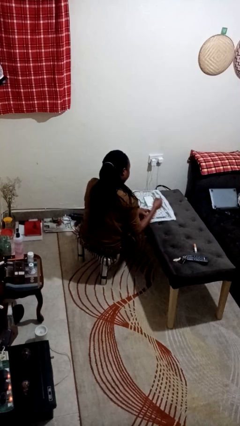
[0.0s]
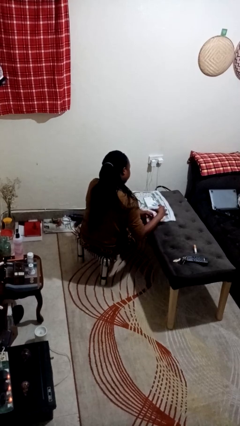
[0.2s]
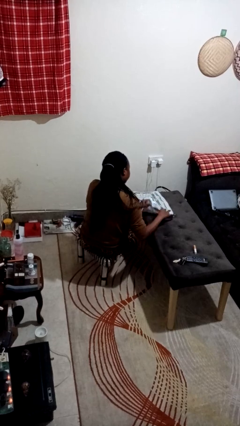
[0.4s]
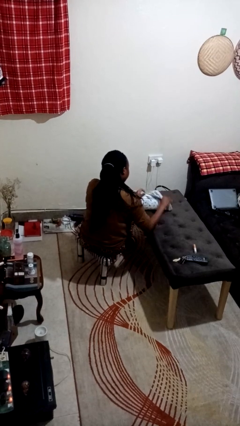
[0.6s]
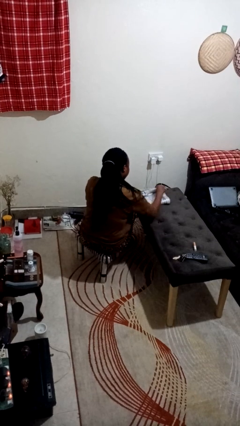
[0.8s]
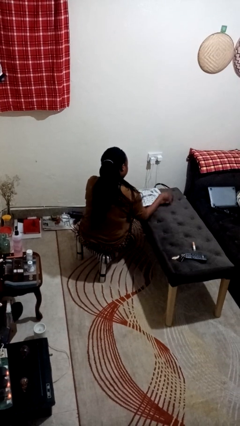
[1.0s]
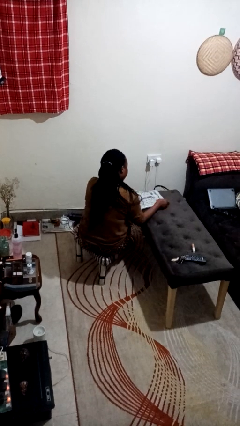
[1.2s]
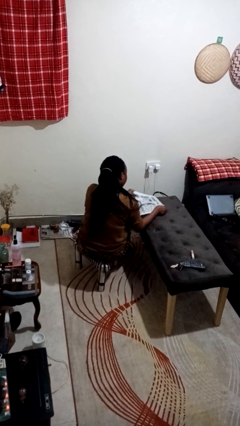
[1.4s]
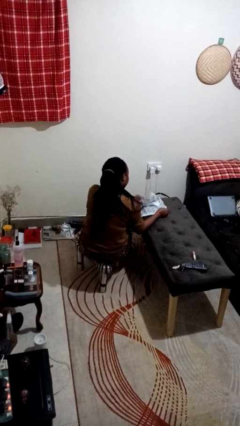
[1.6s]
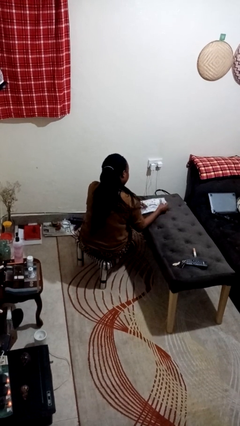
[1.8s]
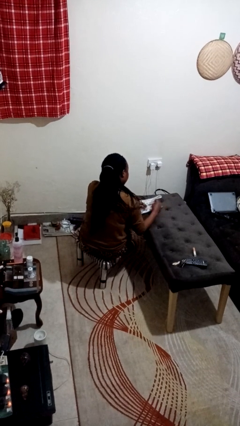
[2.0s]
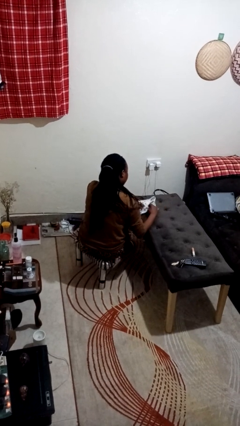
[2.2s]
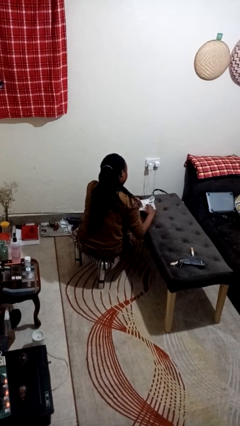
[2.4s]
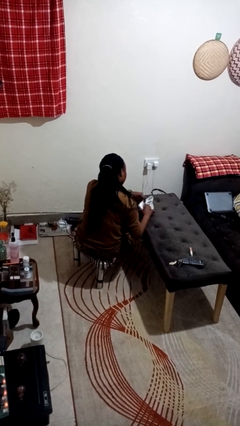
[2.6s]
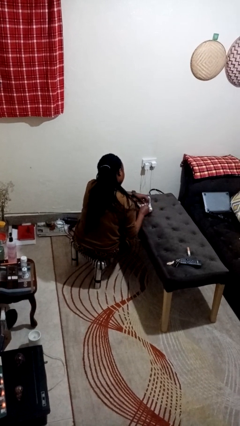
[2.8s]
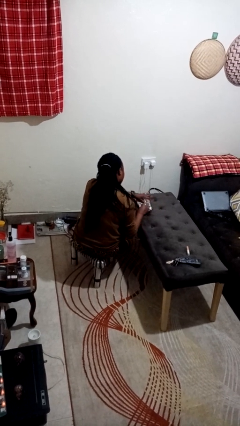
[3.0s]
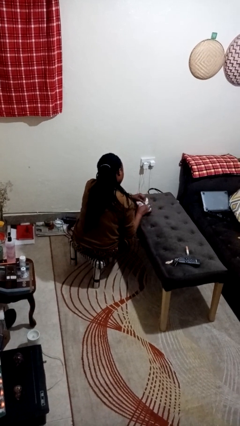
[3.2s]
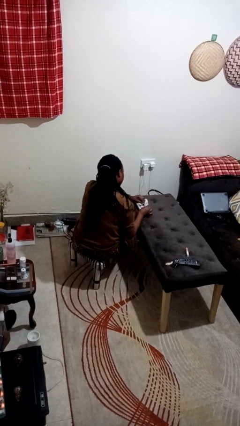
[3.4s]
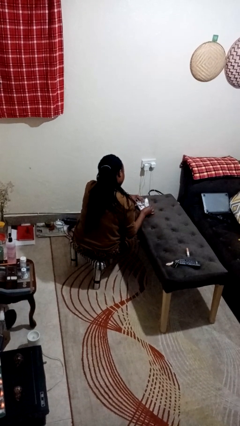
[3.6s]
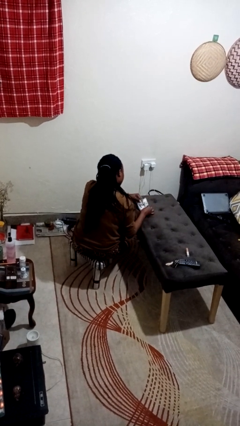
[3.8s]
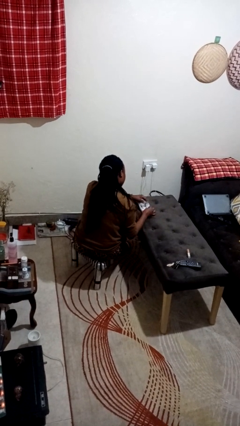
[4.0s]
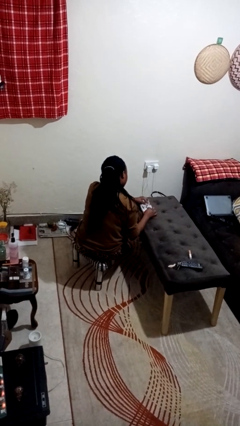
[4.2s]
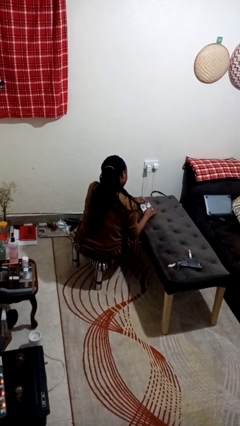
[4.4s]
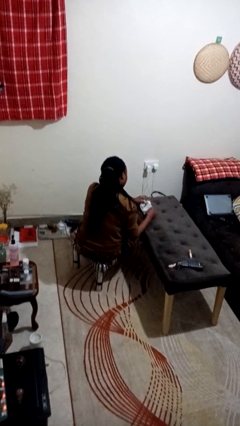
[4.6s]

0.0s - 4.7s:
person wraps box

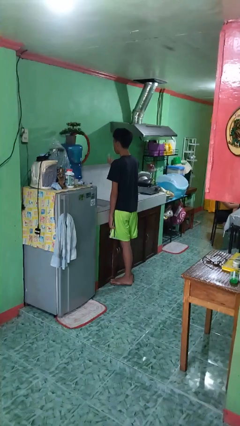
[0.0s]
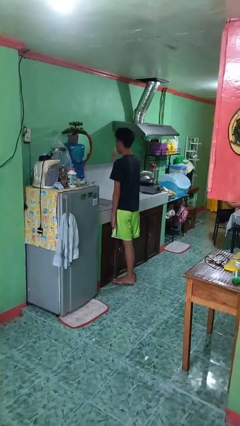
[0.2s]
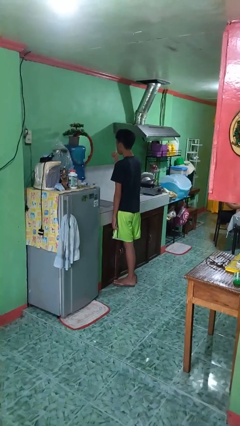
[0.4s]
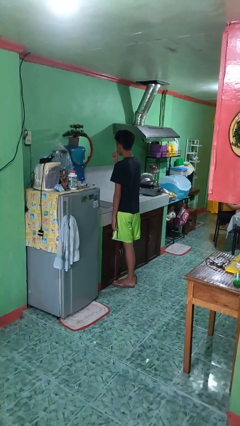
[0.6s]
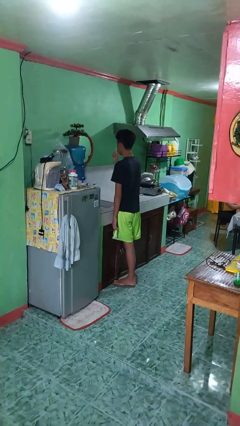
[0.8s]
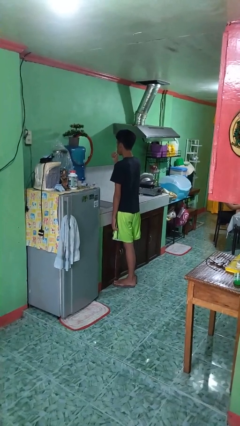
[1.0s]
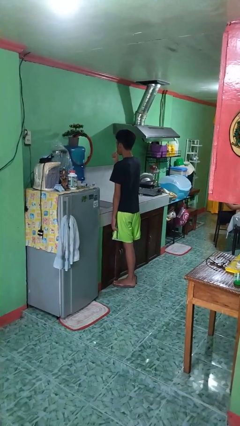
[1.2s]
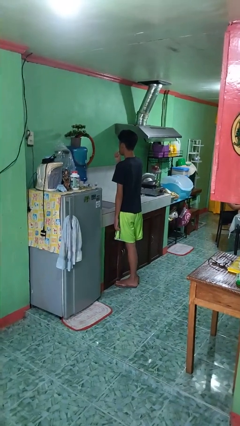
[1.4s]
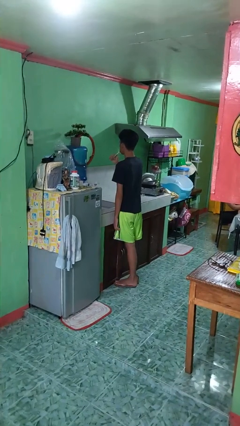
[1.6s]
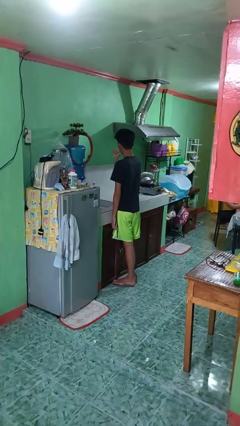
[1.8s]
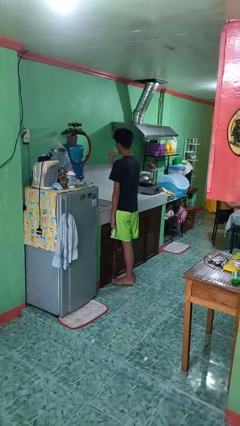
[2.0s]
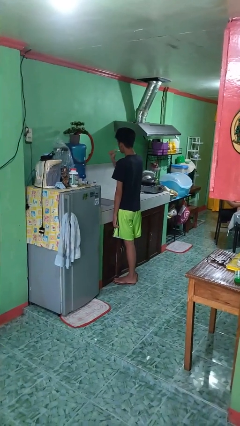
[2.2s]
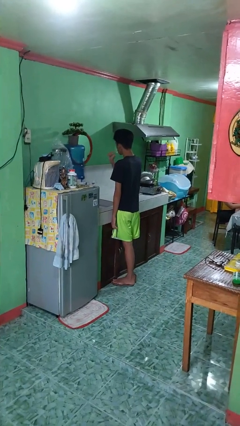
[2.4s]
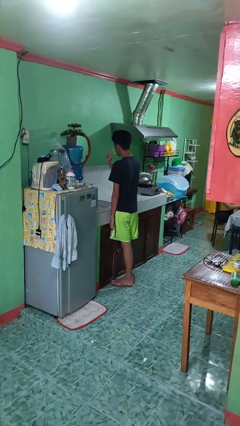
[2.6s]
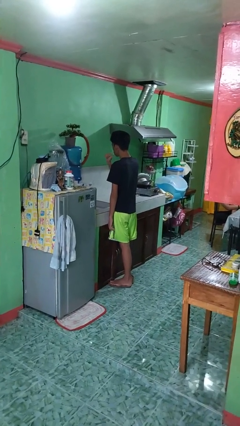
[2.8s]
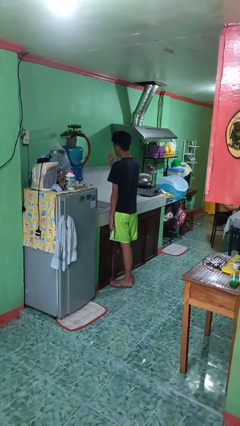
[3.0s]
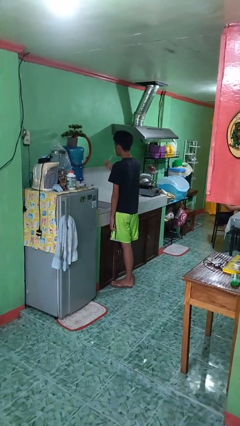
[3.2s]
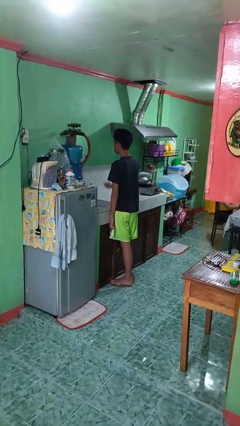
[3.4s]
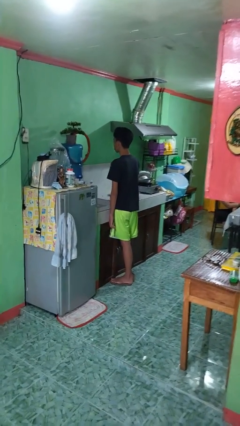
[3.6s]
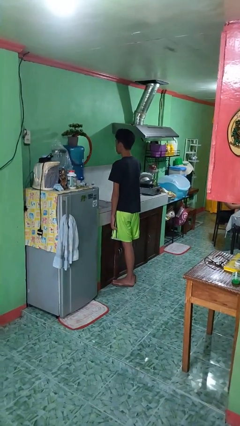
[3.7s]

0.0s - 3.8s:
person brushes teeth

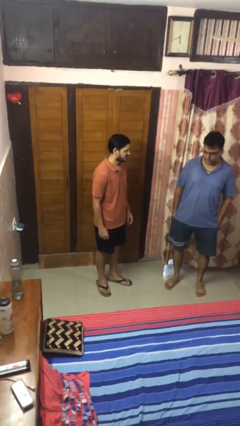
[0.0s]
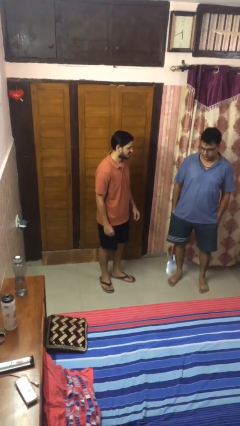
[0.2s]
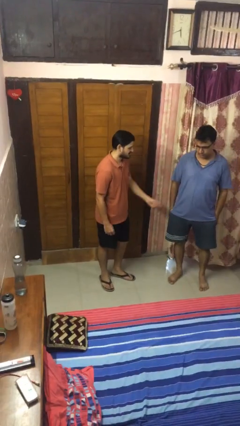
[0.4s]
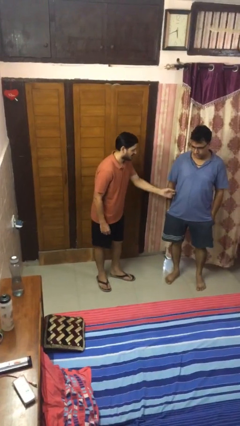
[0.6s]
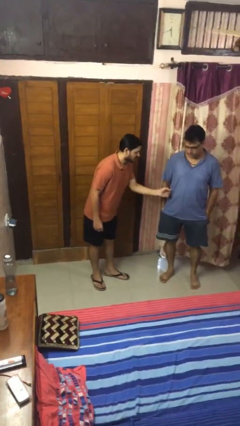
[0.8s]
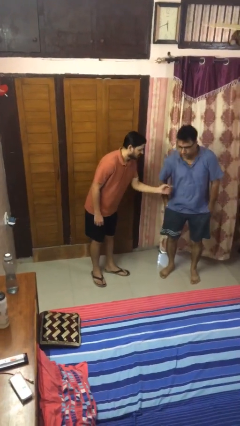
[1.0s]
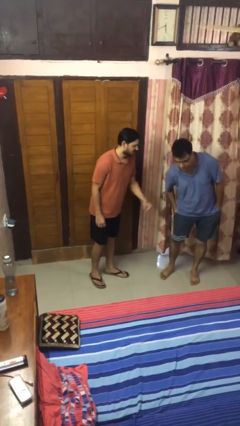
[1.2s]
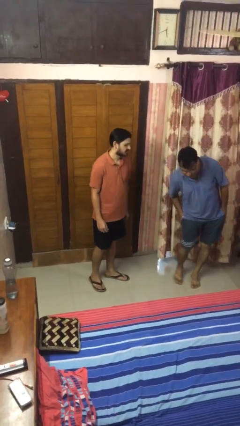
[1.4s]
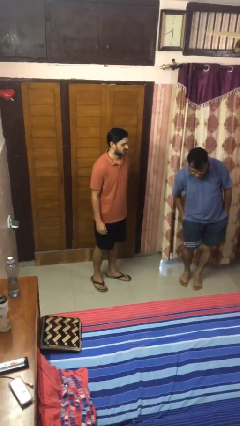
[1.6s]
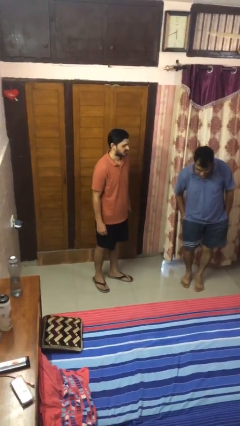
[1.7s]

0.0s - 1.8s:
person tickles person

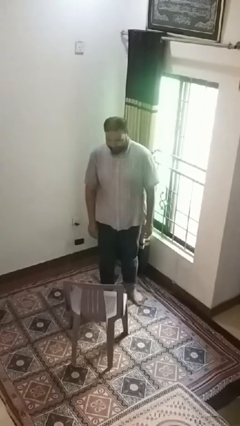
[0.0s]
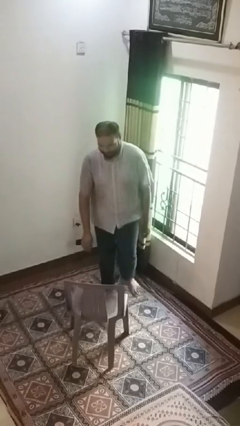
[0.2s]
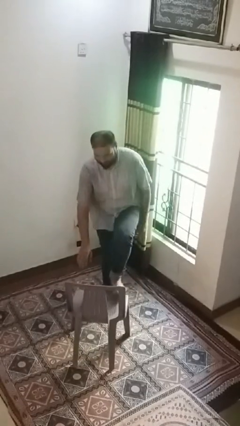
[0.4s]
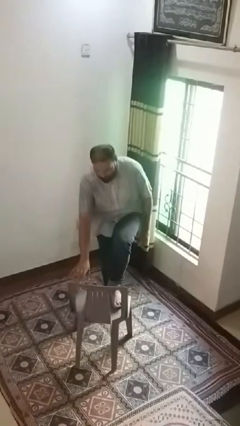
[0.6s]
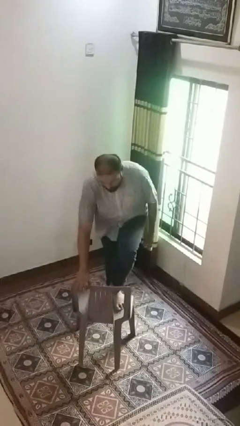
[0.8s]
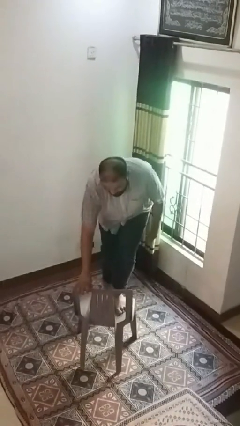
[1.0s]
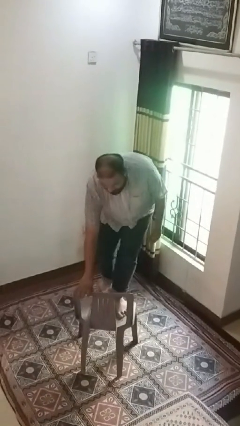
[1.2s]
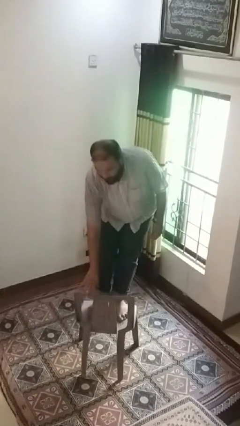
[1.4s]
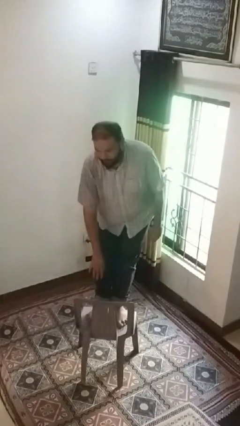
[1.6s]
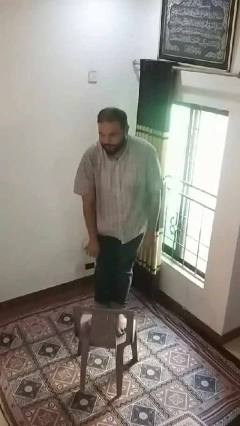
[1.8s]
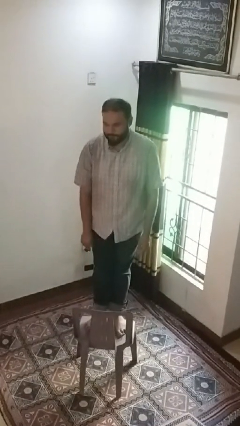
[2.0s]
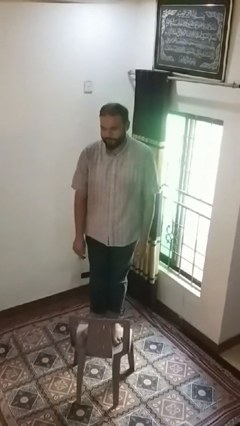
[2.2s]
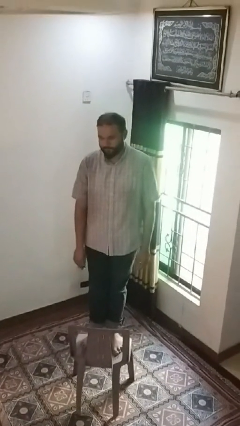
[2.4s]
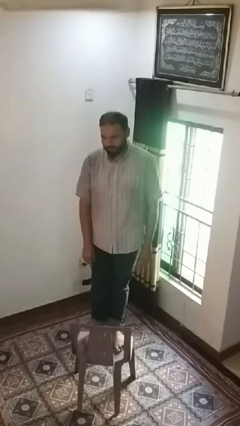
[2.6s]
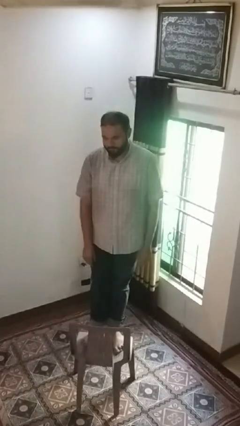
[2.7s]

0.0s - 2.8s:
person climbs on chair

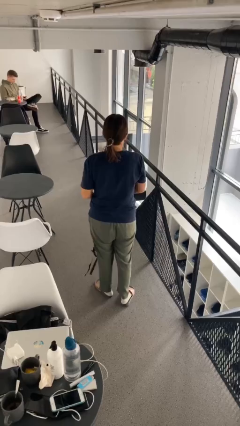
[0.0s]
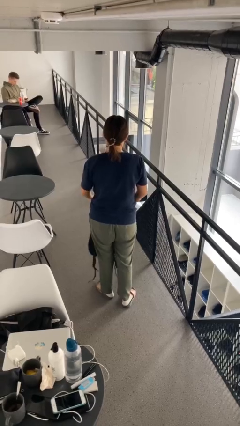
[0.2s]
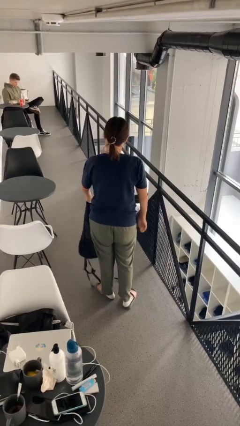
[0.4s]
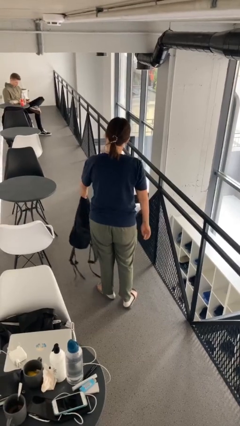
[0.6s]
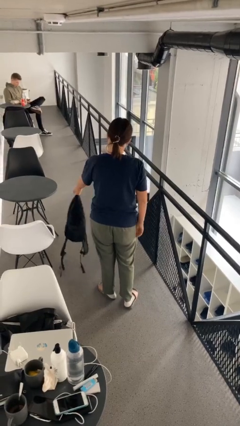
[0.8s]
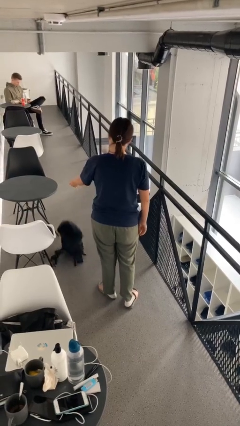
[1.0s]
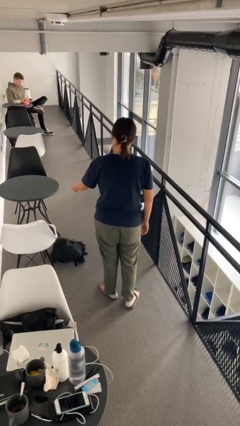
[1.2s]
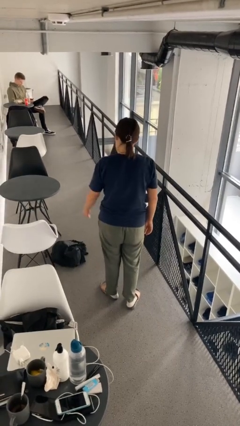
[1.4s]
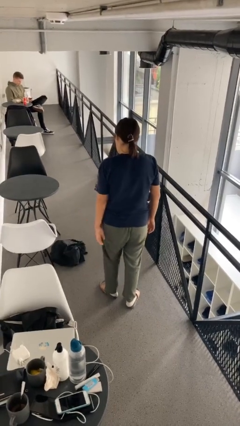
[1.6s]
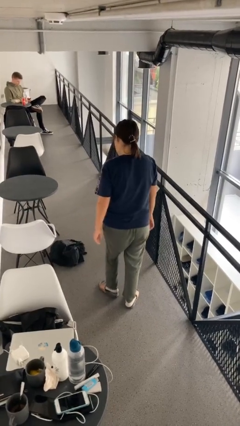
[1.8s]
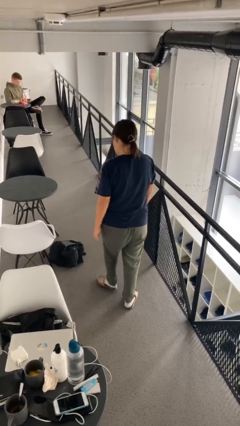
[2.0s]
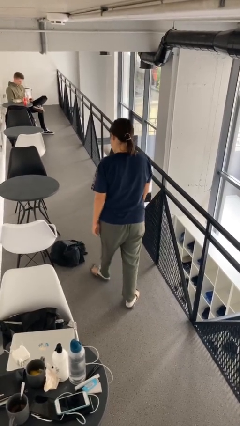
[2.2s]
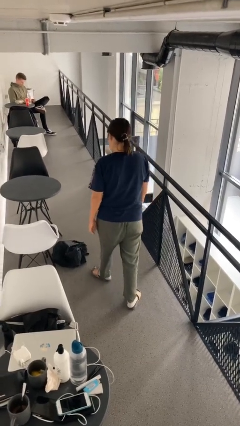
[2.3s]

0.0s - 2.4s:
person throws object to ground

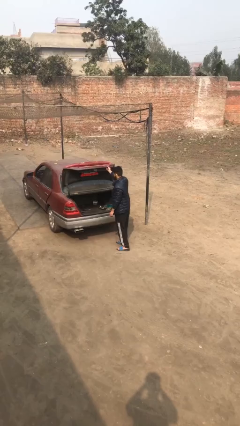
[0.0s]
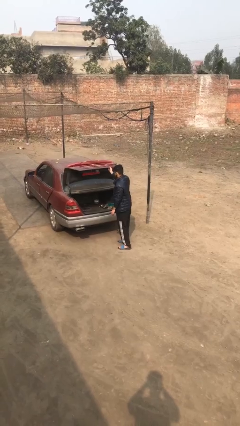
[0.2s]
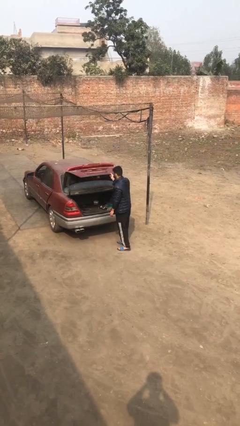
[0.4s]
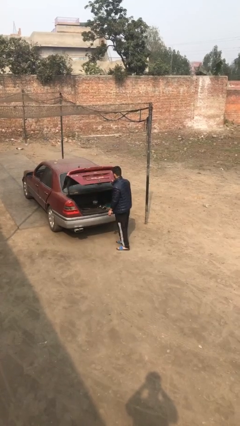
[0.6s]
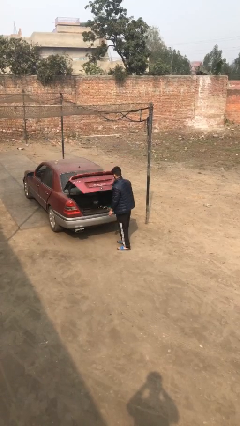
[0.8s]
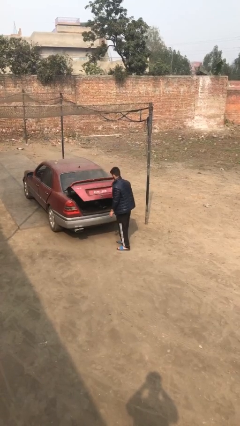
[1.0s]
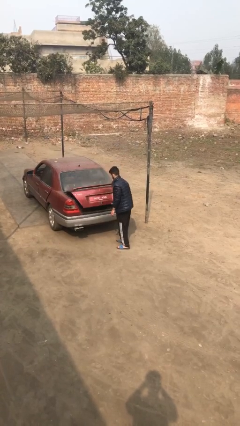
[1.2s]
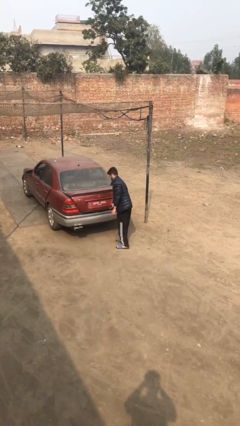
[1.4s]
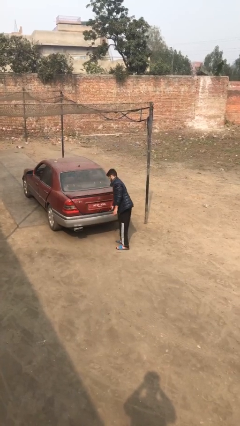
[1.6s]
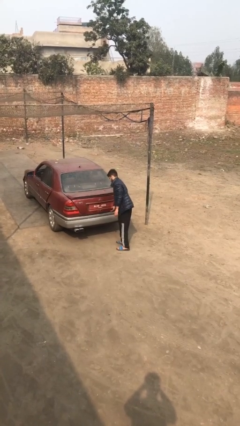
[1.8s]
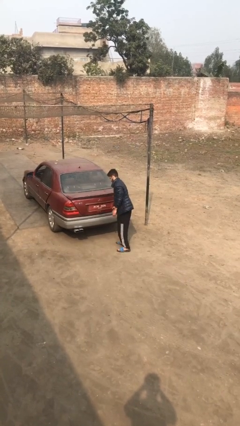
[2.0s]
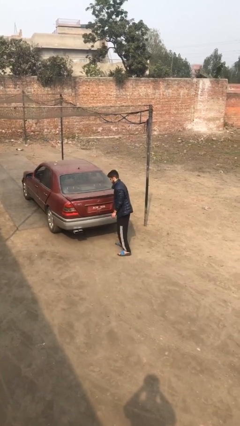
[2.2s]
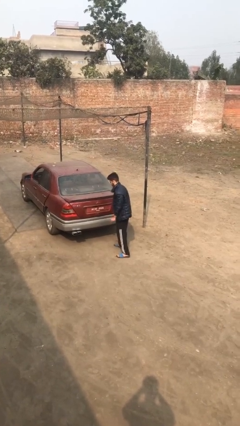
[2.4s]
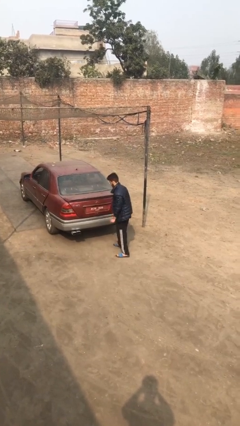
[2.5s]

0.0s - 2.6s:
person closes car trunk
